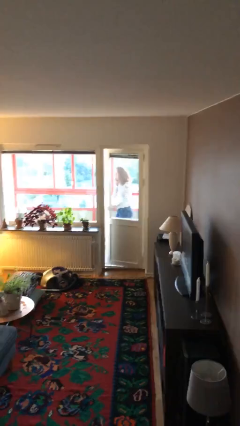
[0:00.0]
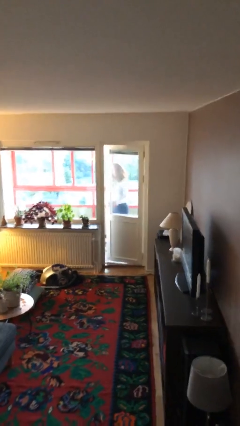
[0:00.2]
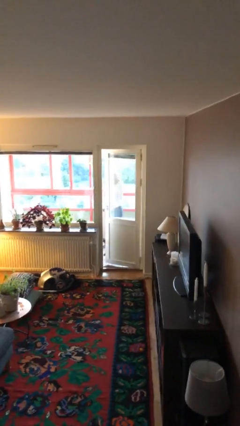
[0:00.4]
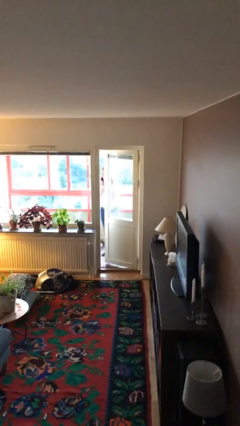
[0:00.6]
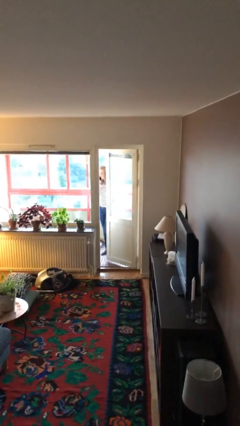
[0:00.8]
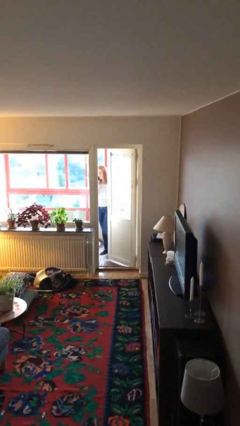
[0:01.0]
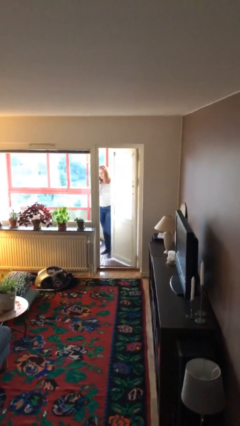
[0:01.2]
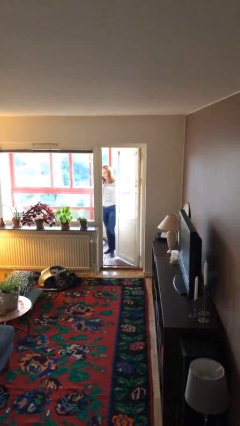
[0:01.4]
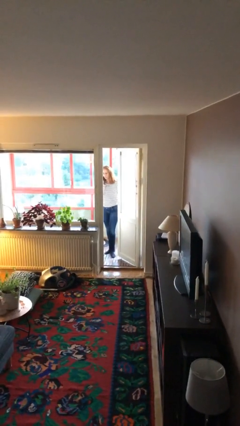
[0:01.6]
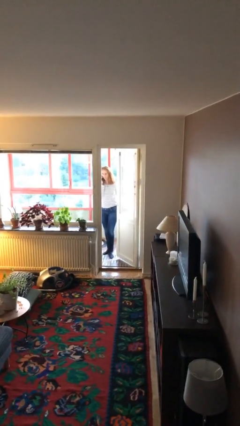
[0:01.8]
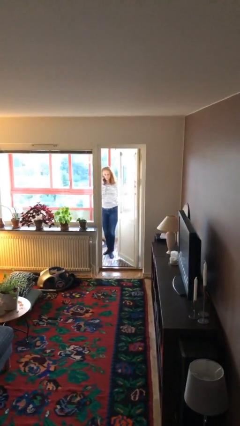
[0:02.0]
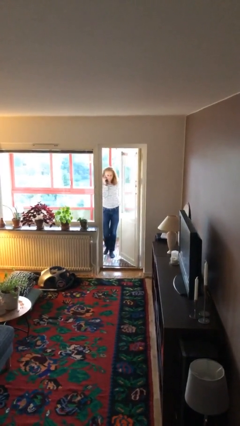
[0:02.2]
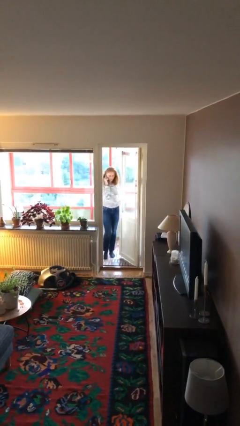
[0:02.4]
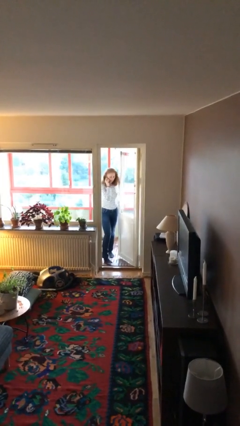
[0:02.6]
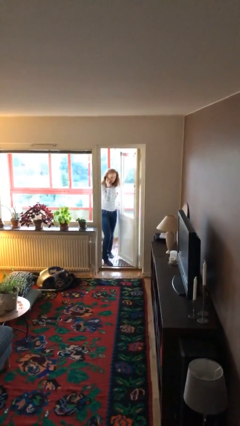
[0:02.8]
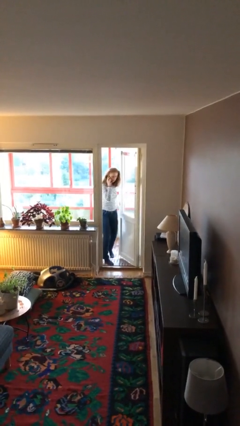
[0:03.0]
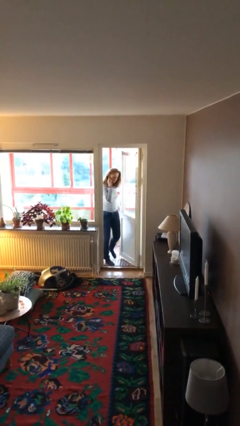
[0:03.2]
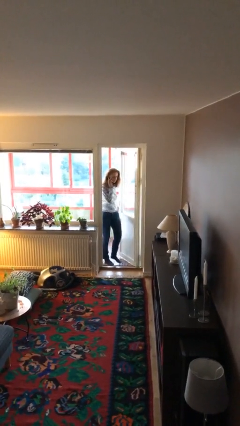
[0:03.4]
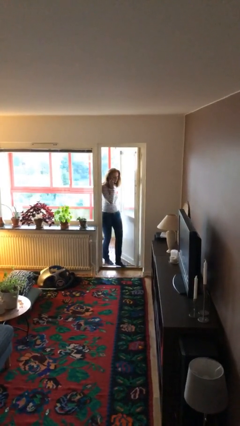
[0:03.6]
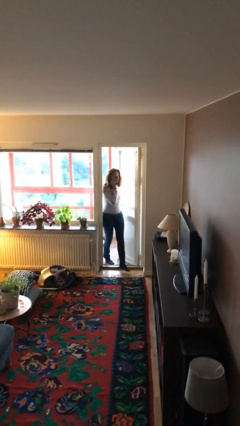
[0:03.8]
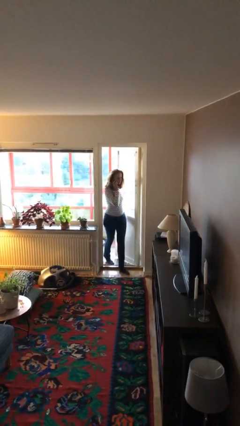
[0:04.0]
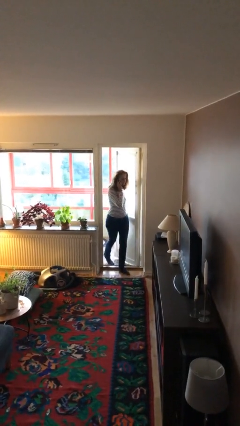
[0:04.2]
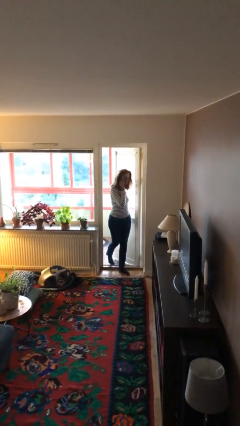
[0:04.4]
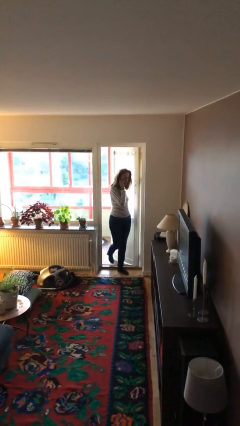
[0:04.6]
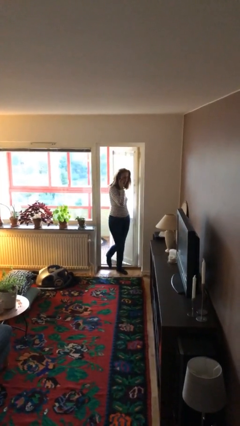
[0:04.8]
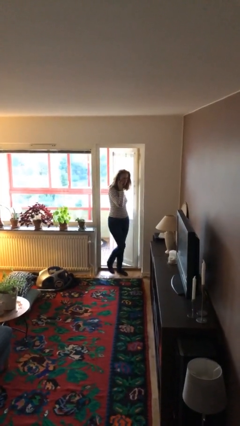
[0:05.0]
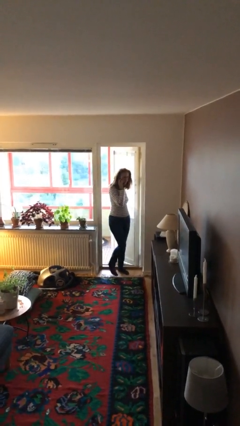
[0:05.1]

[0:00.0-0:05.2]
person opens facility door

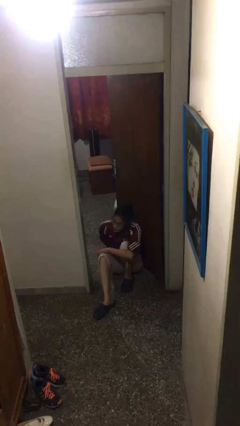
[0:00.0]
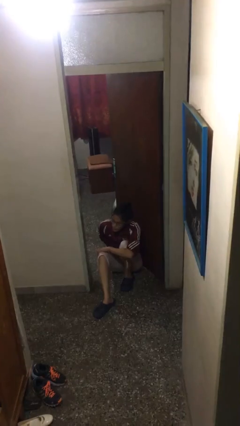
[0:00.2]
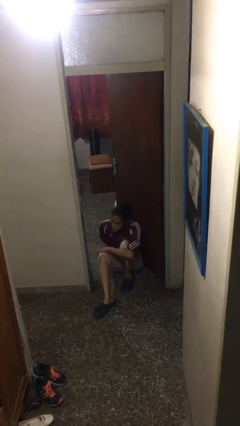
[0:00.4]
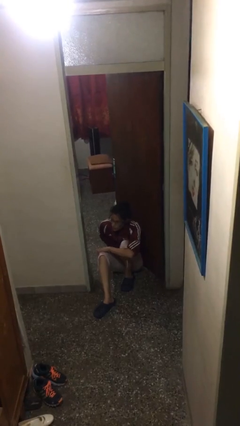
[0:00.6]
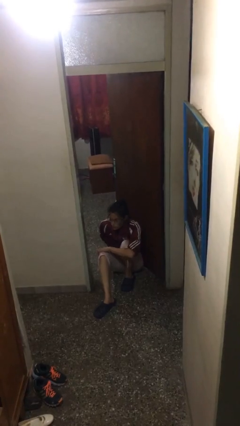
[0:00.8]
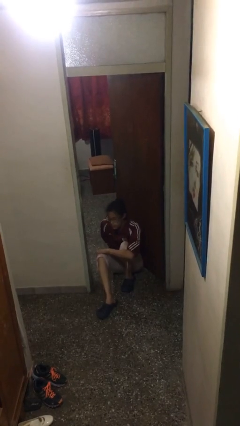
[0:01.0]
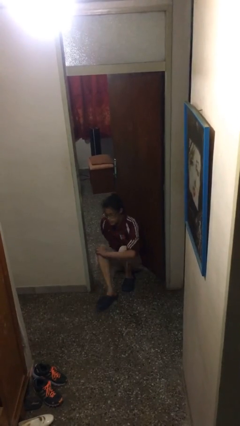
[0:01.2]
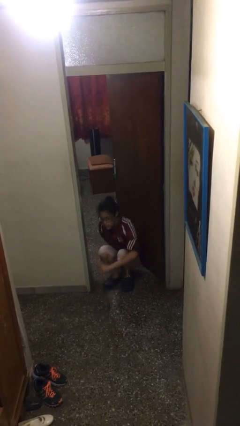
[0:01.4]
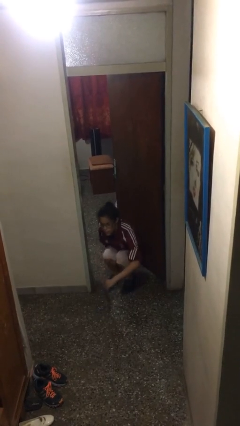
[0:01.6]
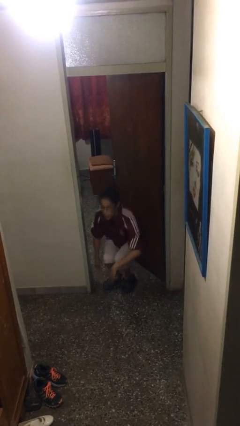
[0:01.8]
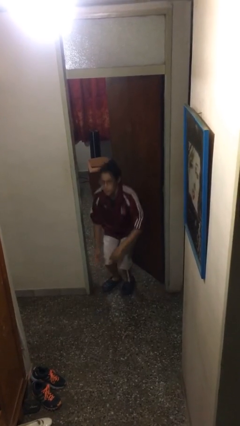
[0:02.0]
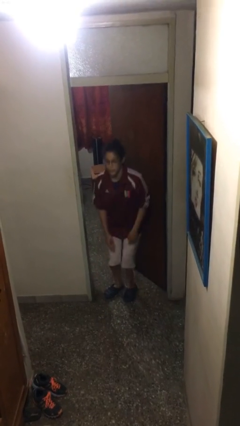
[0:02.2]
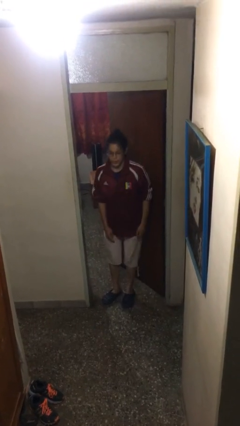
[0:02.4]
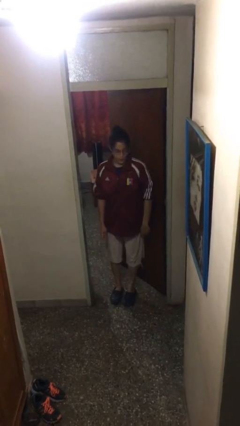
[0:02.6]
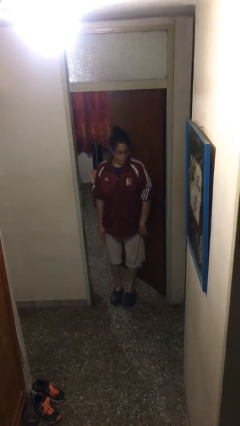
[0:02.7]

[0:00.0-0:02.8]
person stands up

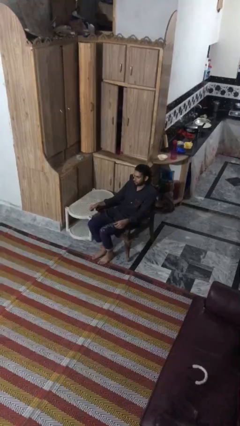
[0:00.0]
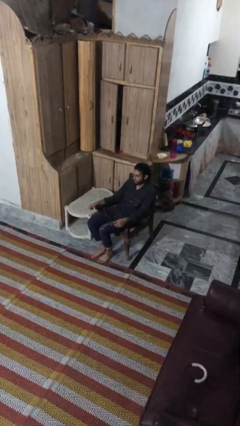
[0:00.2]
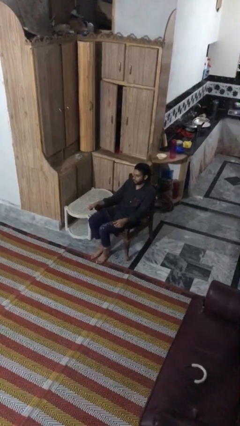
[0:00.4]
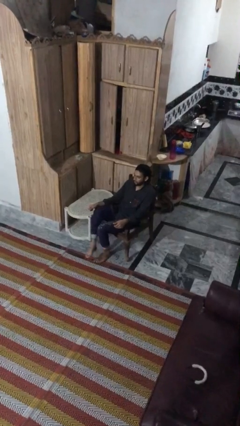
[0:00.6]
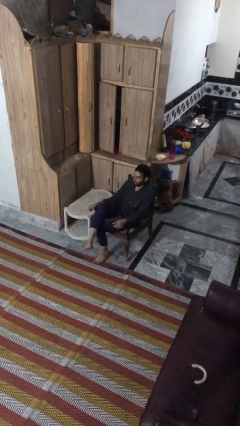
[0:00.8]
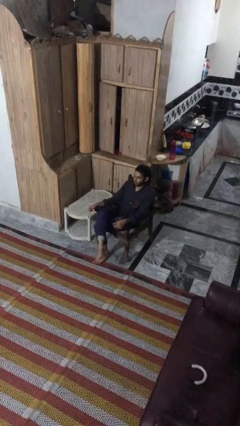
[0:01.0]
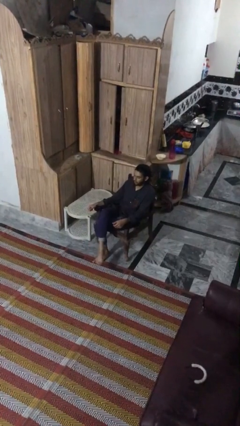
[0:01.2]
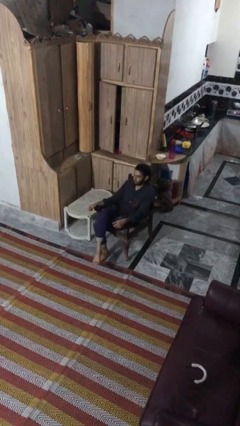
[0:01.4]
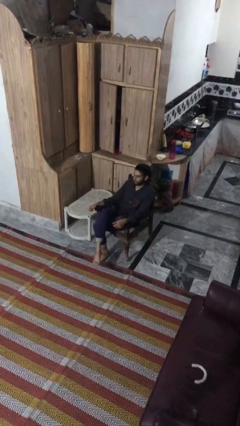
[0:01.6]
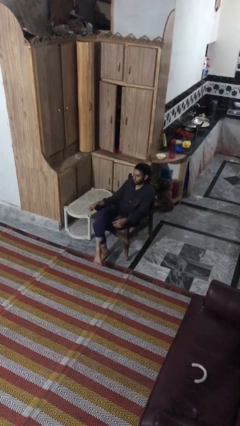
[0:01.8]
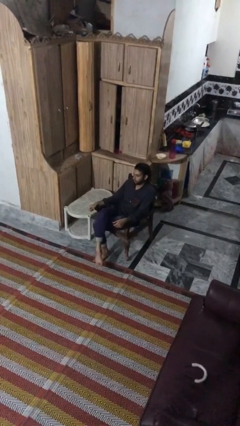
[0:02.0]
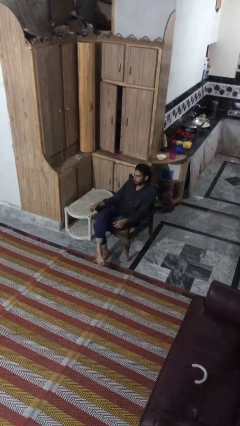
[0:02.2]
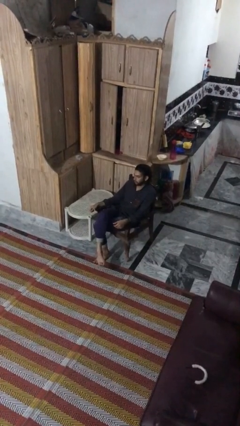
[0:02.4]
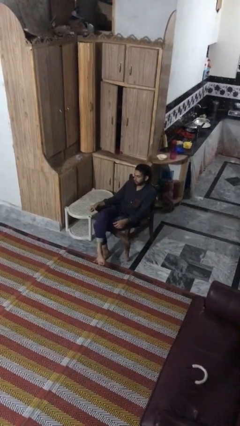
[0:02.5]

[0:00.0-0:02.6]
person crosses legs

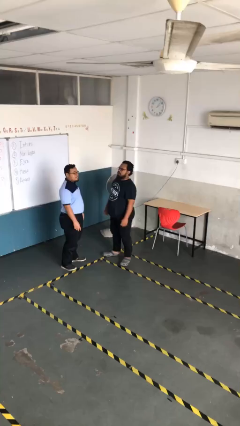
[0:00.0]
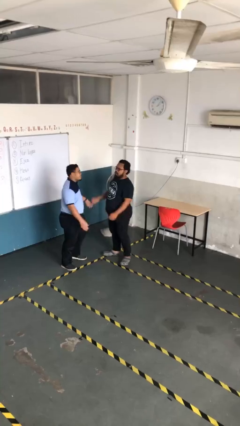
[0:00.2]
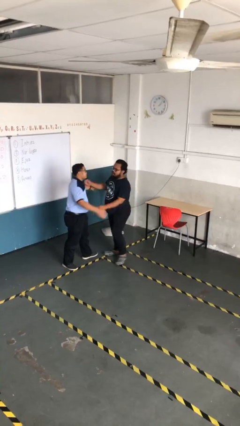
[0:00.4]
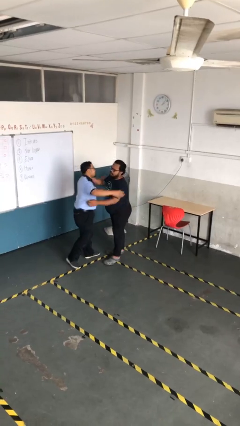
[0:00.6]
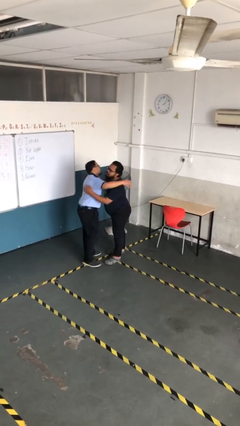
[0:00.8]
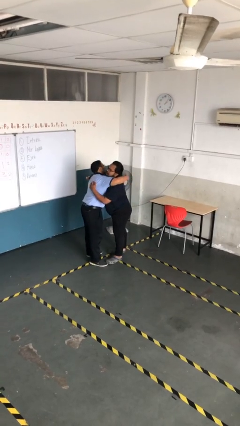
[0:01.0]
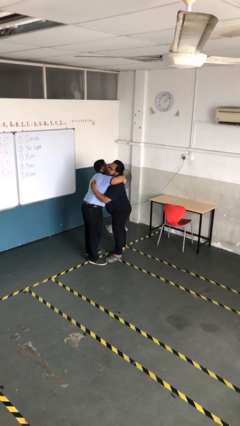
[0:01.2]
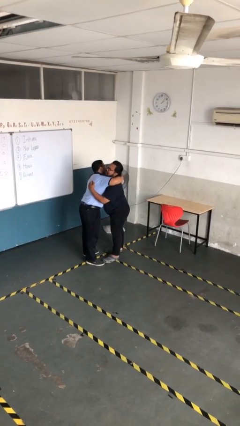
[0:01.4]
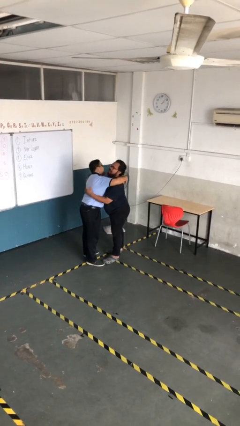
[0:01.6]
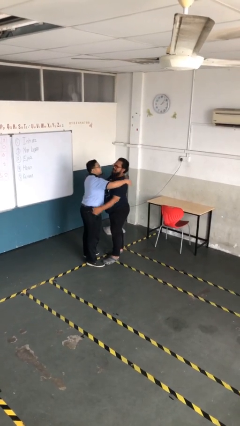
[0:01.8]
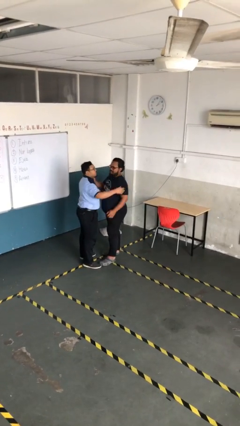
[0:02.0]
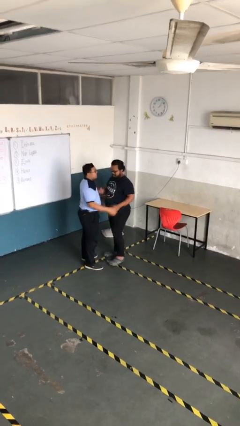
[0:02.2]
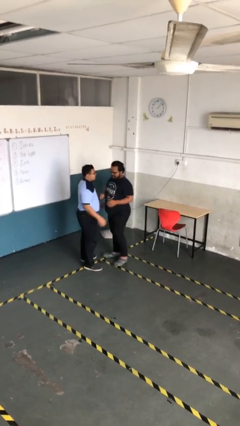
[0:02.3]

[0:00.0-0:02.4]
person embraces person

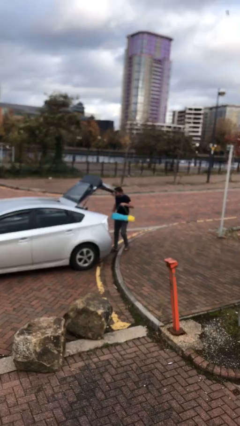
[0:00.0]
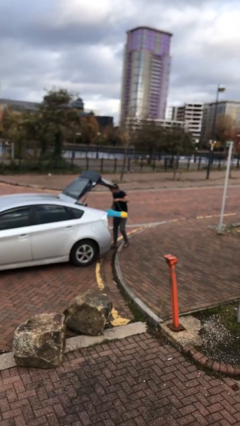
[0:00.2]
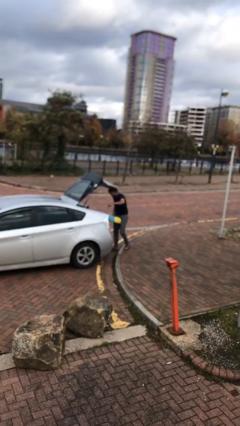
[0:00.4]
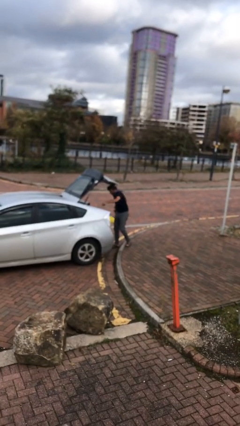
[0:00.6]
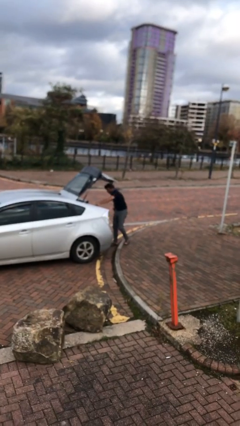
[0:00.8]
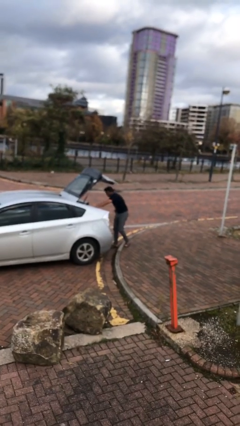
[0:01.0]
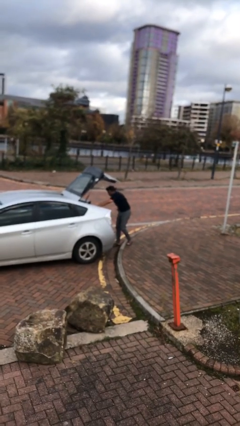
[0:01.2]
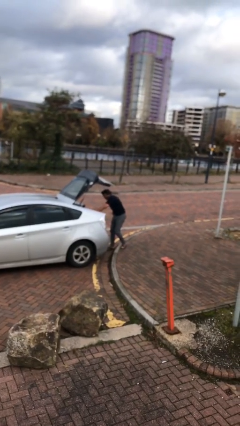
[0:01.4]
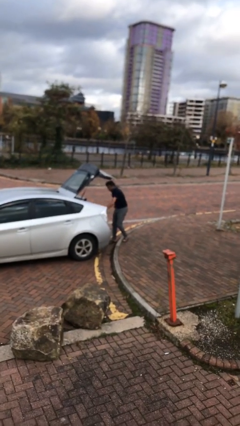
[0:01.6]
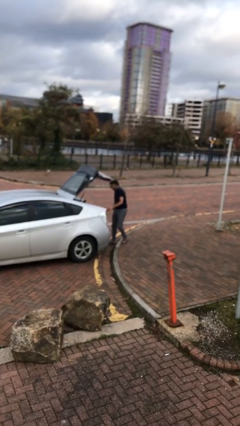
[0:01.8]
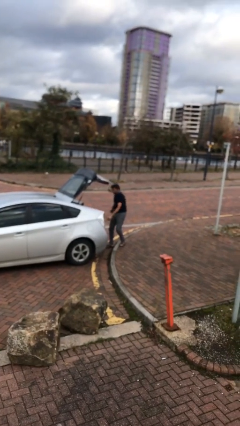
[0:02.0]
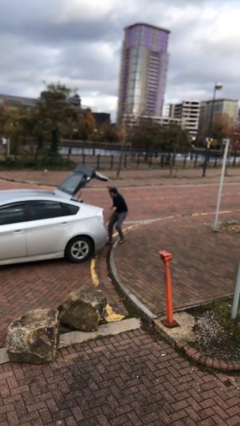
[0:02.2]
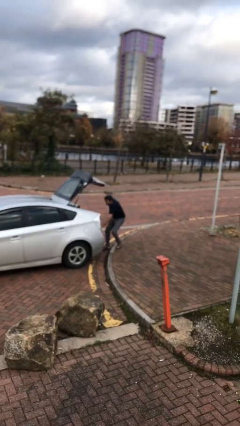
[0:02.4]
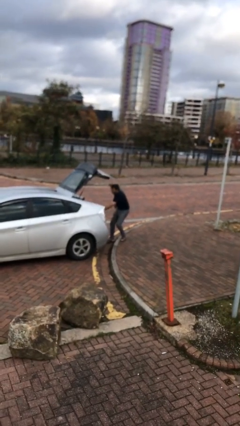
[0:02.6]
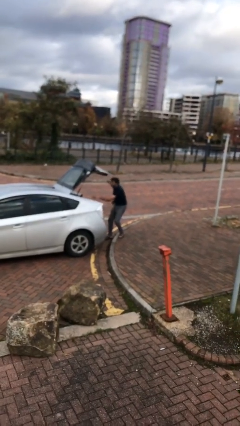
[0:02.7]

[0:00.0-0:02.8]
person loads car

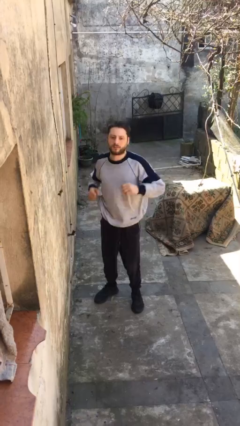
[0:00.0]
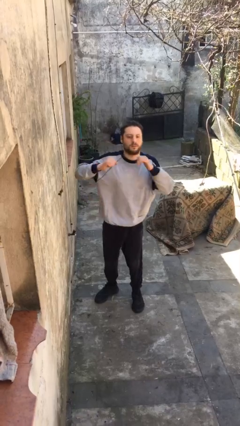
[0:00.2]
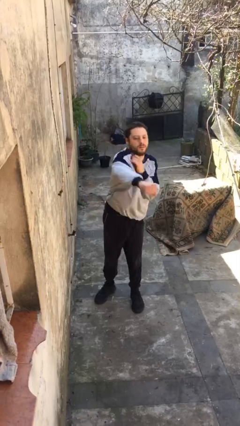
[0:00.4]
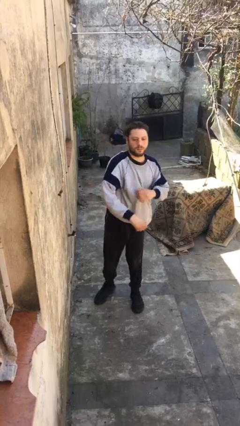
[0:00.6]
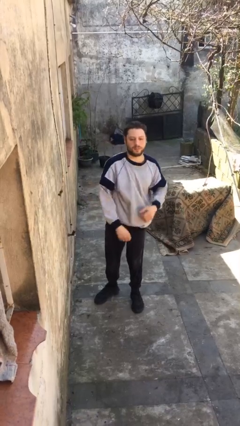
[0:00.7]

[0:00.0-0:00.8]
person punches

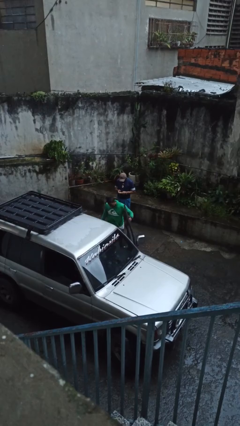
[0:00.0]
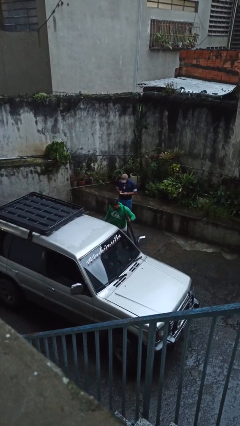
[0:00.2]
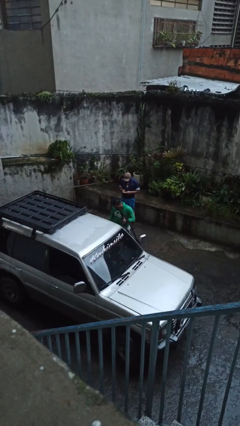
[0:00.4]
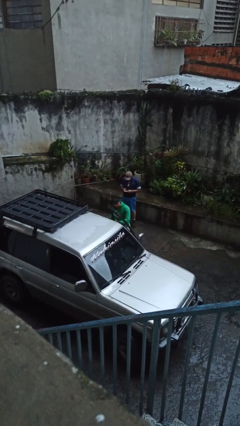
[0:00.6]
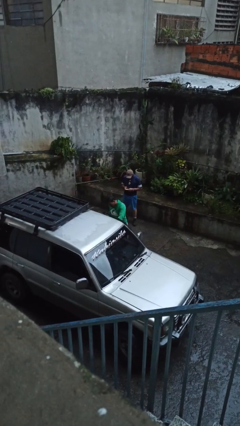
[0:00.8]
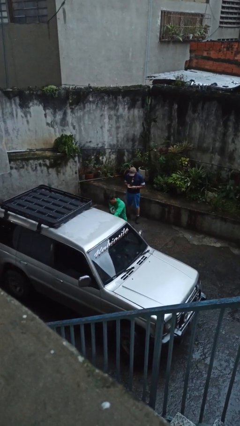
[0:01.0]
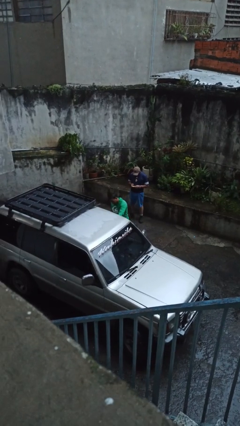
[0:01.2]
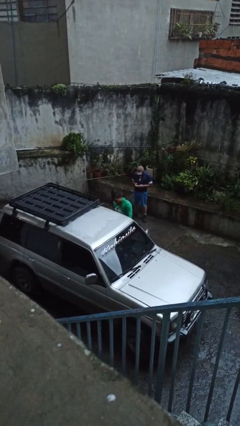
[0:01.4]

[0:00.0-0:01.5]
person closes car door
